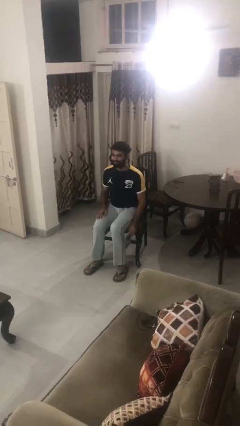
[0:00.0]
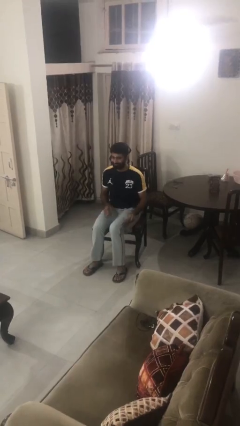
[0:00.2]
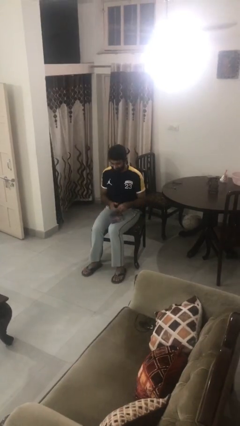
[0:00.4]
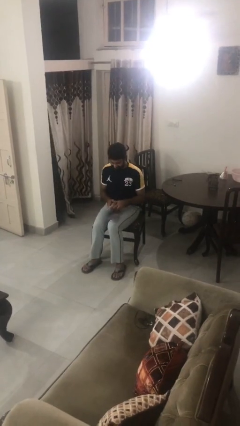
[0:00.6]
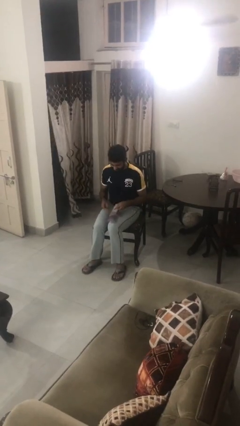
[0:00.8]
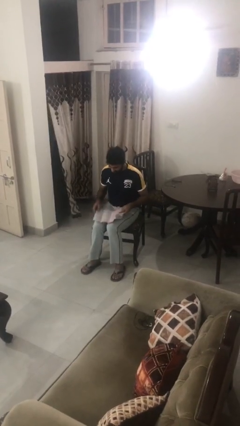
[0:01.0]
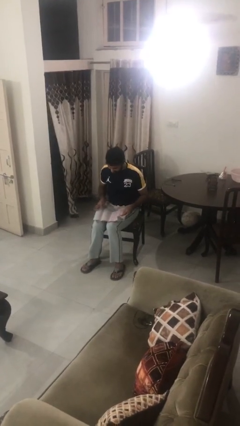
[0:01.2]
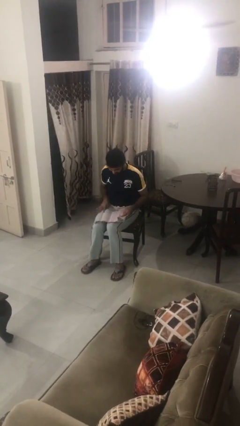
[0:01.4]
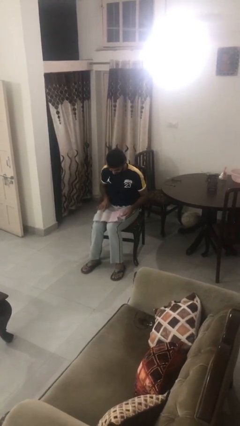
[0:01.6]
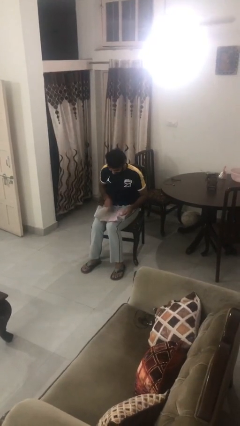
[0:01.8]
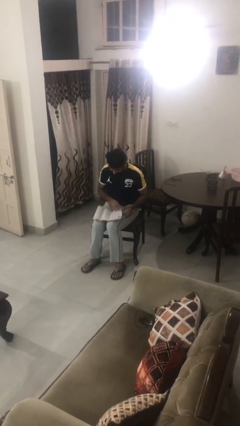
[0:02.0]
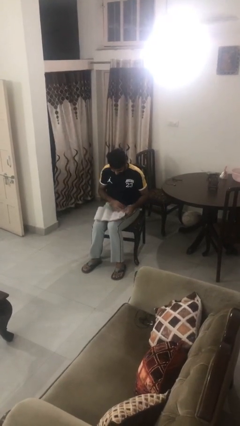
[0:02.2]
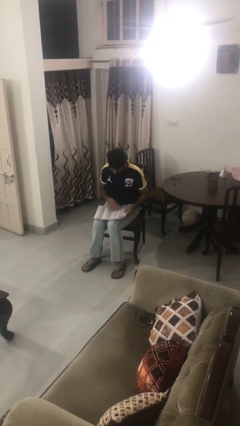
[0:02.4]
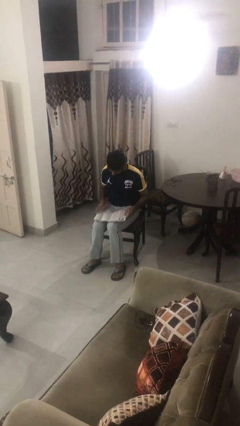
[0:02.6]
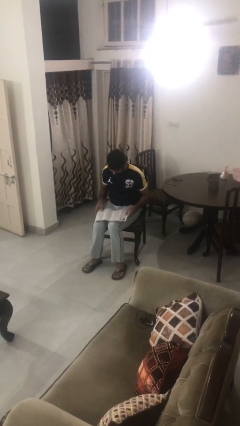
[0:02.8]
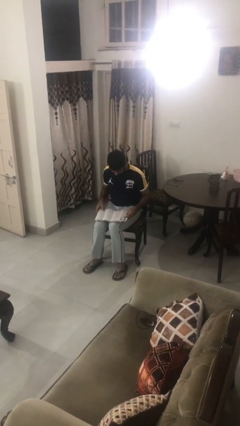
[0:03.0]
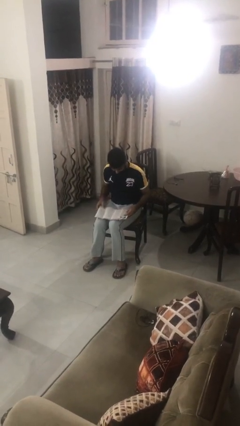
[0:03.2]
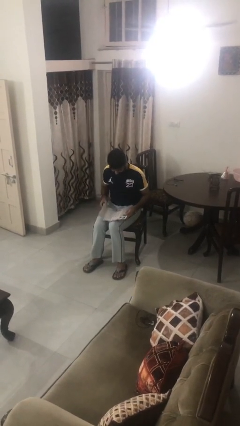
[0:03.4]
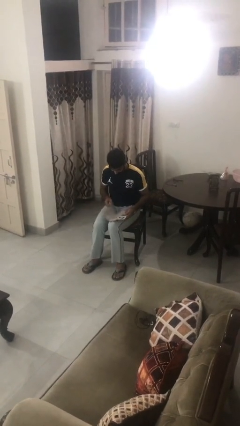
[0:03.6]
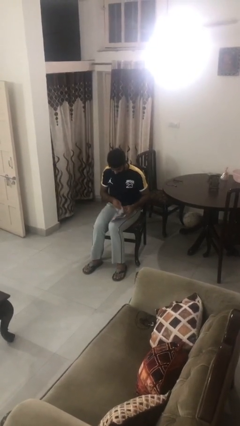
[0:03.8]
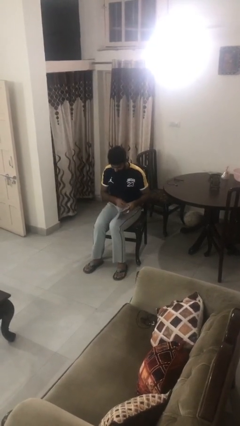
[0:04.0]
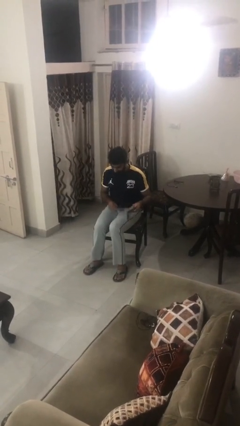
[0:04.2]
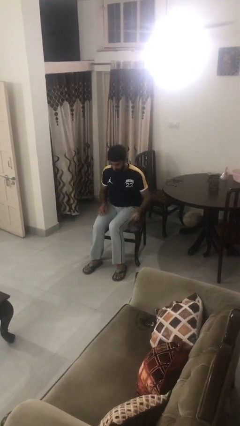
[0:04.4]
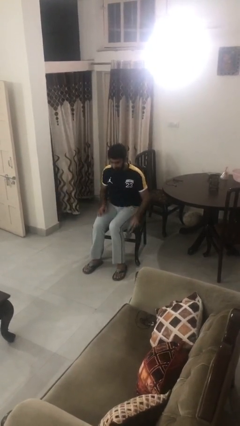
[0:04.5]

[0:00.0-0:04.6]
person reads magazine

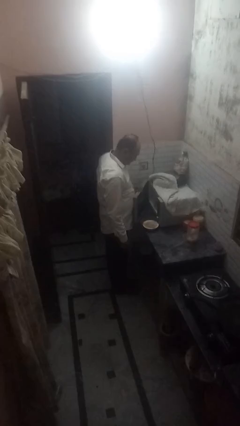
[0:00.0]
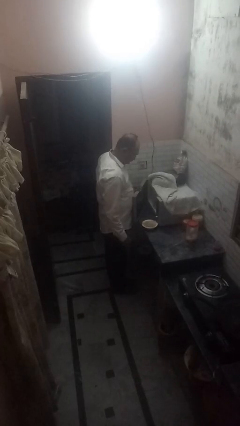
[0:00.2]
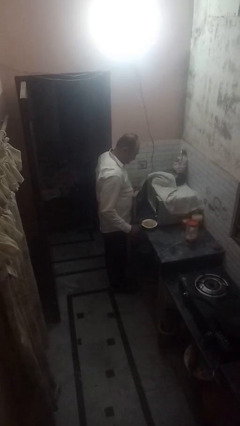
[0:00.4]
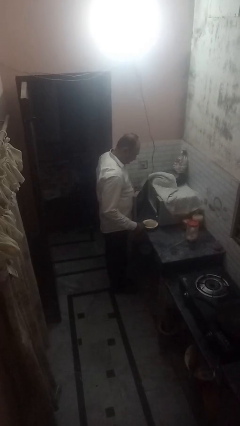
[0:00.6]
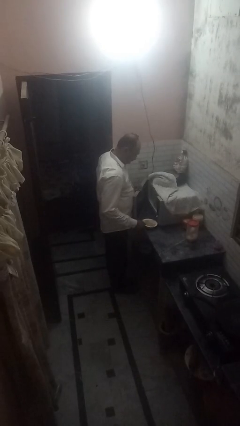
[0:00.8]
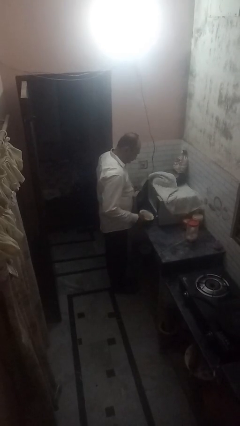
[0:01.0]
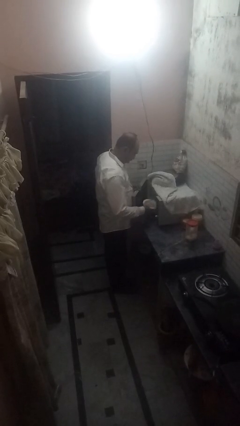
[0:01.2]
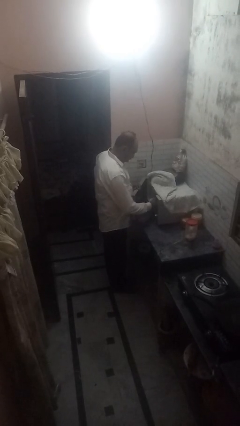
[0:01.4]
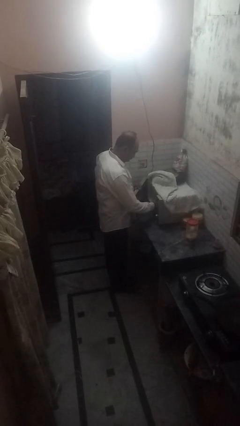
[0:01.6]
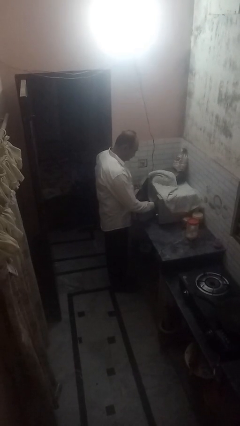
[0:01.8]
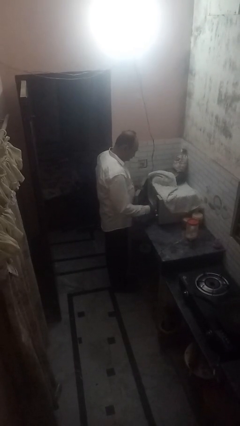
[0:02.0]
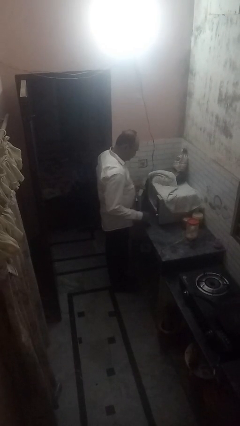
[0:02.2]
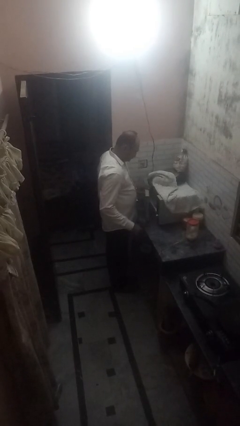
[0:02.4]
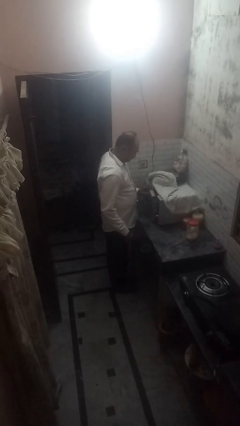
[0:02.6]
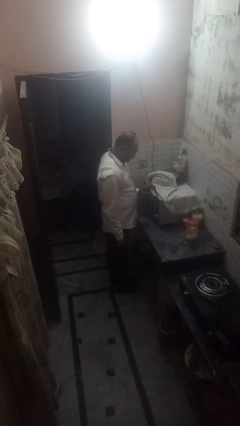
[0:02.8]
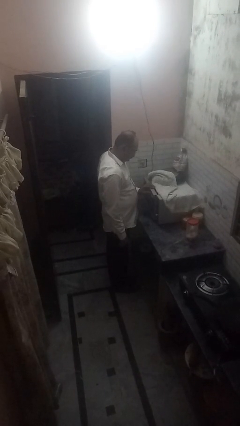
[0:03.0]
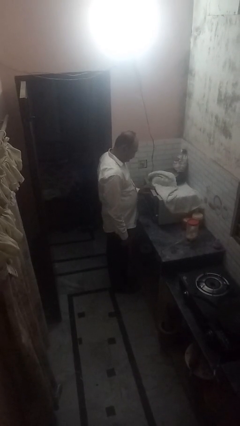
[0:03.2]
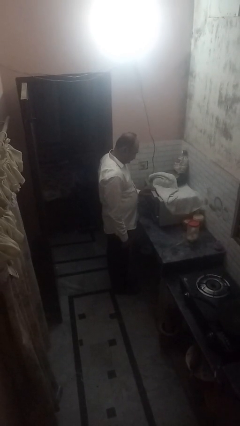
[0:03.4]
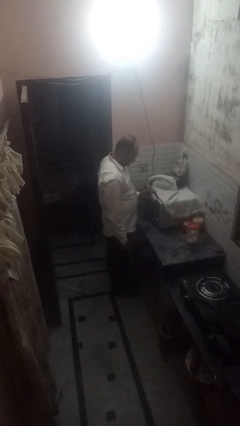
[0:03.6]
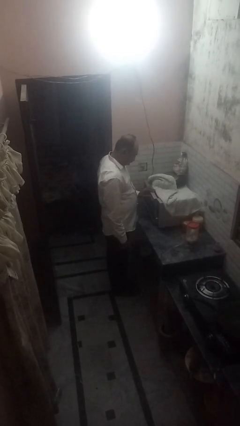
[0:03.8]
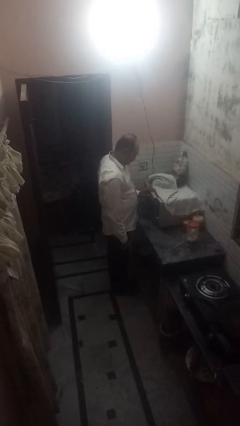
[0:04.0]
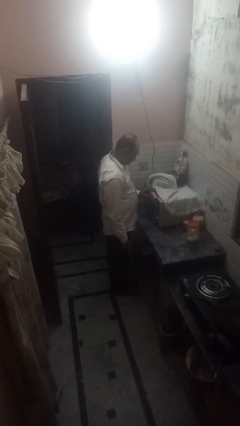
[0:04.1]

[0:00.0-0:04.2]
person puts object into microwave

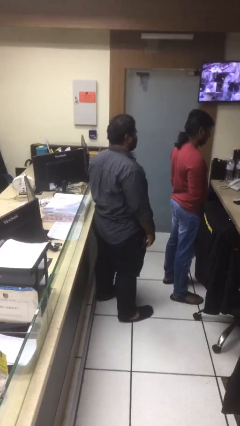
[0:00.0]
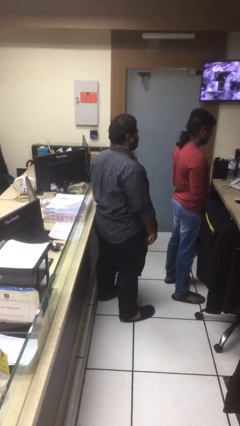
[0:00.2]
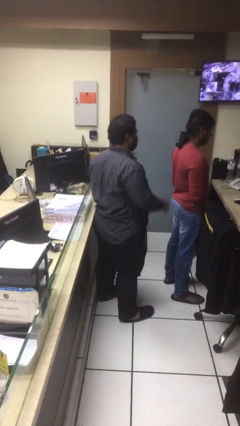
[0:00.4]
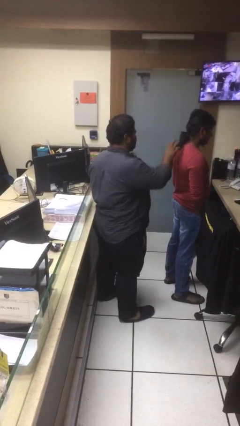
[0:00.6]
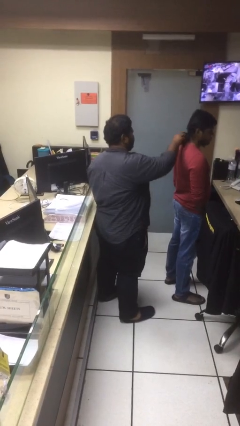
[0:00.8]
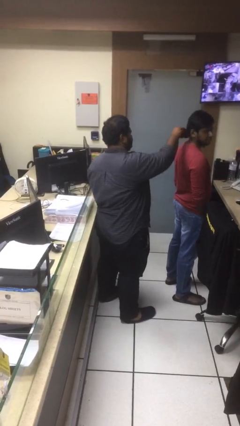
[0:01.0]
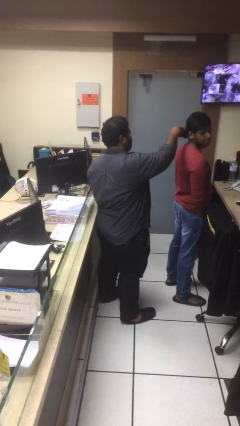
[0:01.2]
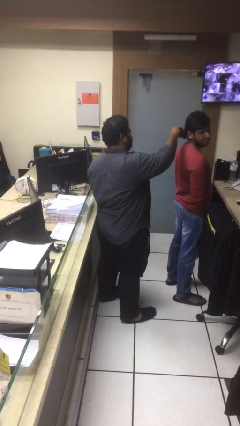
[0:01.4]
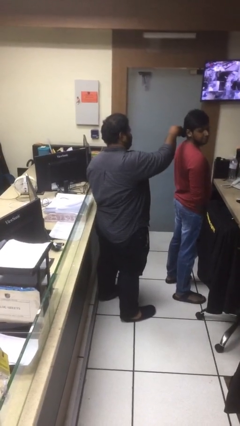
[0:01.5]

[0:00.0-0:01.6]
person grabs person by hair

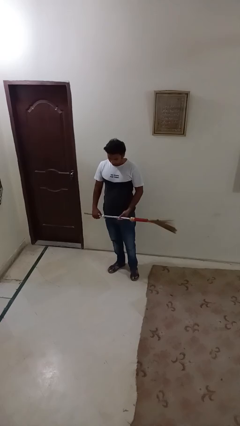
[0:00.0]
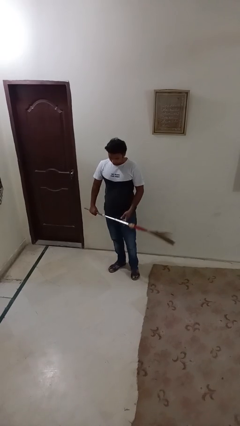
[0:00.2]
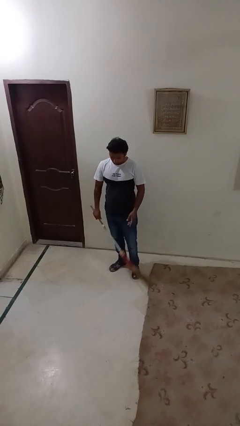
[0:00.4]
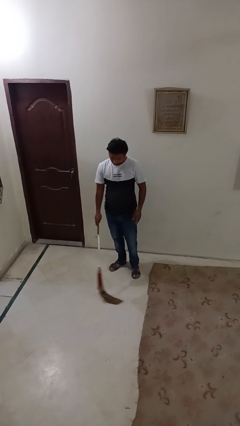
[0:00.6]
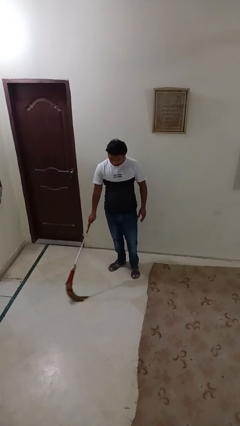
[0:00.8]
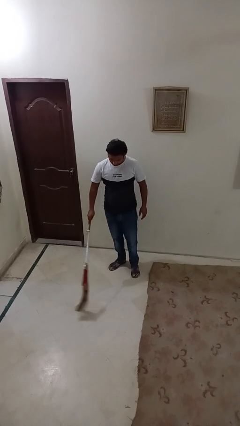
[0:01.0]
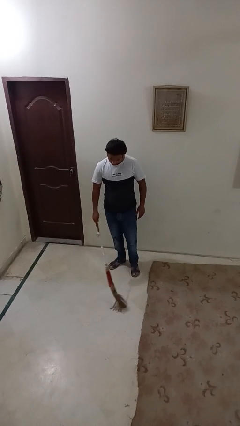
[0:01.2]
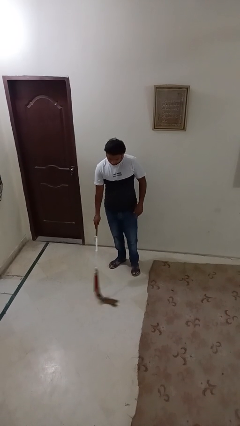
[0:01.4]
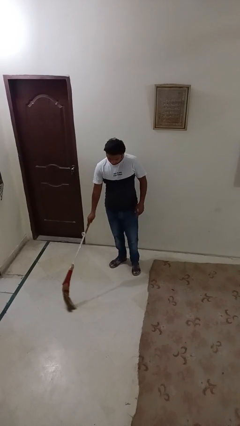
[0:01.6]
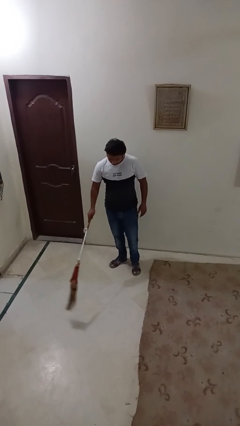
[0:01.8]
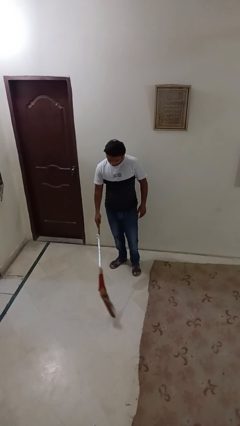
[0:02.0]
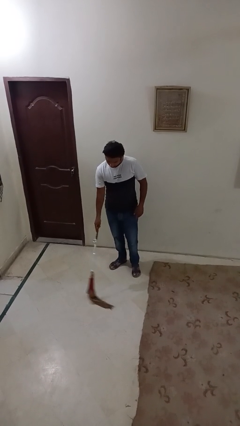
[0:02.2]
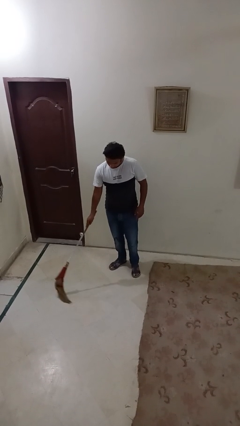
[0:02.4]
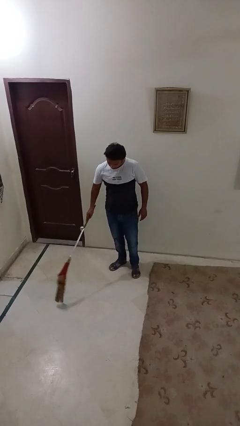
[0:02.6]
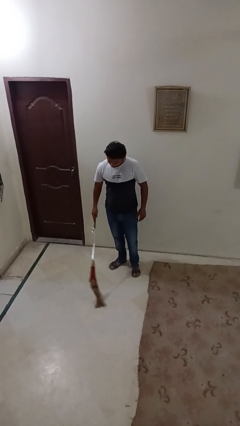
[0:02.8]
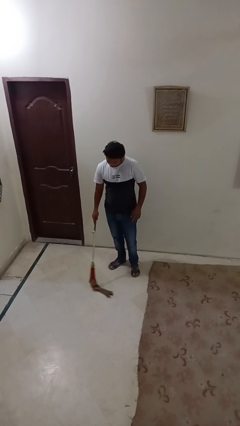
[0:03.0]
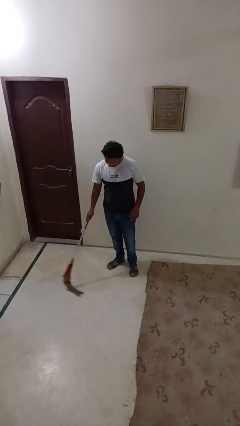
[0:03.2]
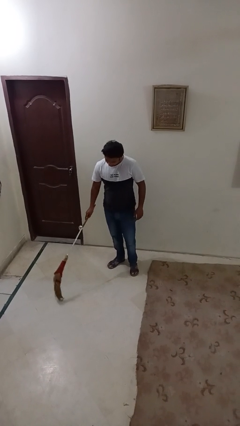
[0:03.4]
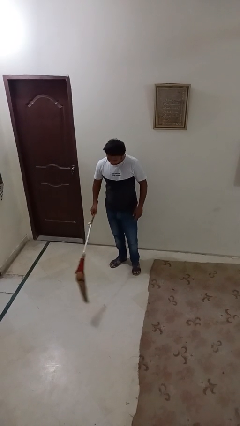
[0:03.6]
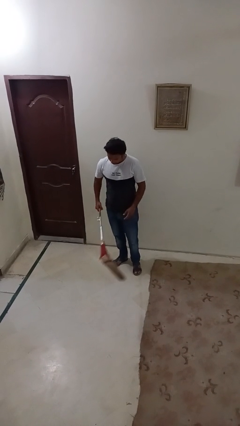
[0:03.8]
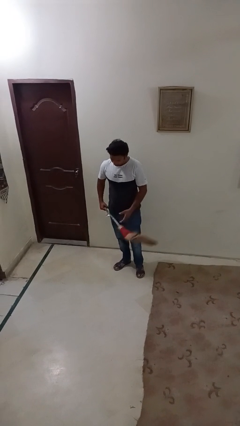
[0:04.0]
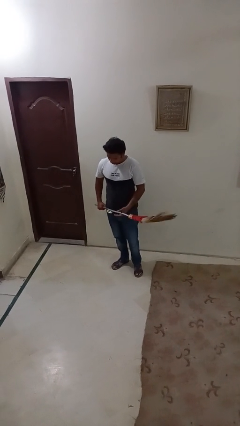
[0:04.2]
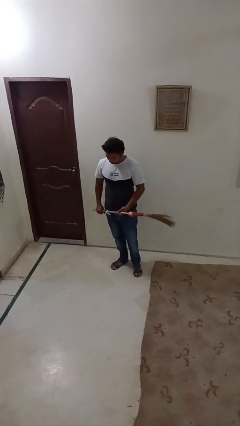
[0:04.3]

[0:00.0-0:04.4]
person sweeps floor

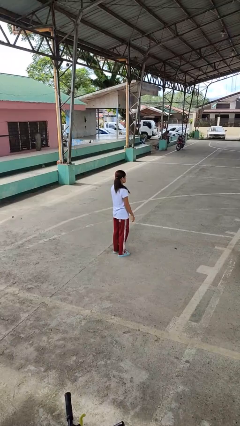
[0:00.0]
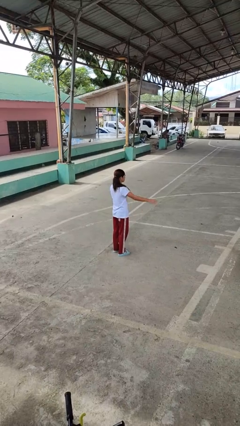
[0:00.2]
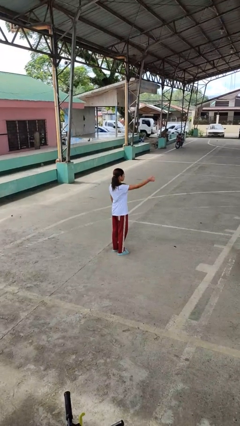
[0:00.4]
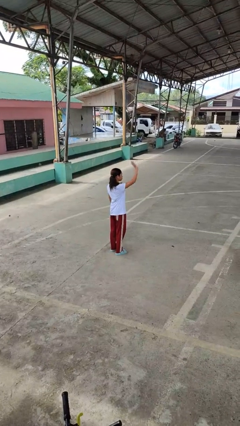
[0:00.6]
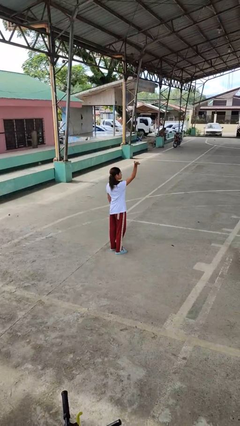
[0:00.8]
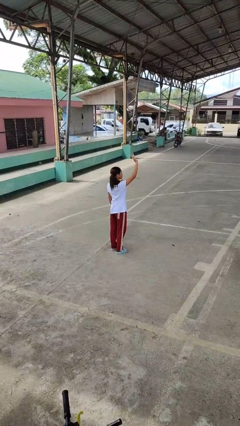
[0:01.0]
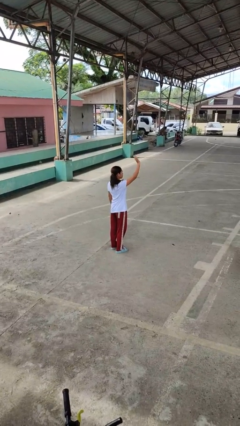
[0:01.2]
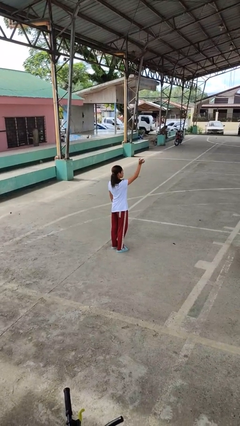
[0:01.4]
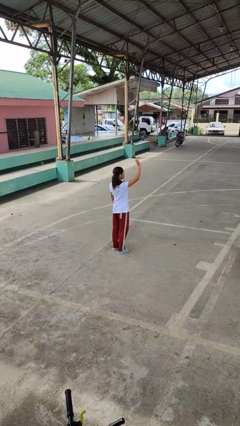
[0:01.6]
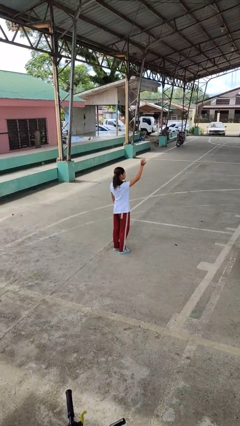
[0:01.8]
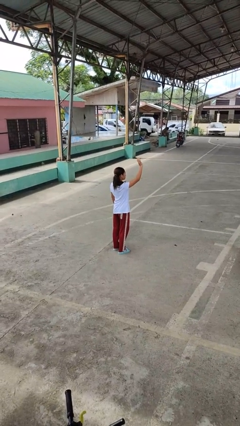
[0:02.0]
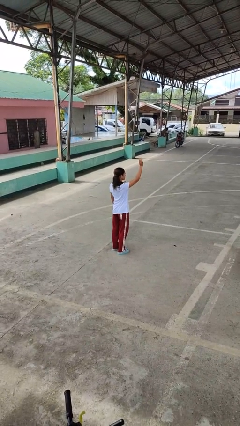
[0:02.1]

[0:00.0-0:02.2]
person waves at person

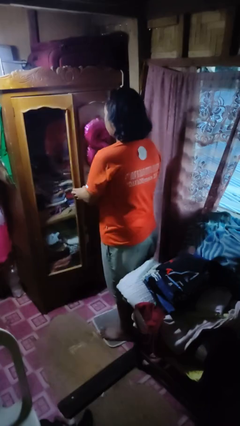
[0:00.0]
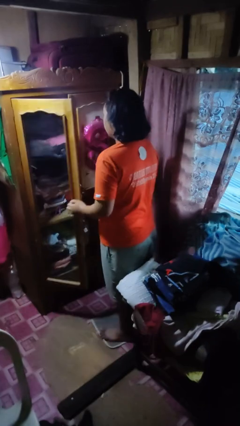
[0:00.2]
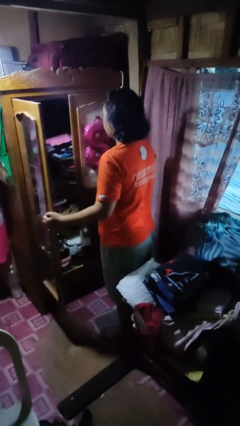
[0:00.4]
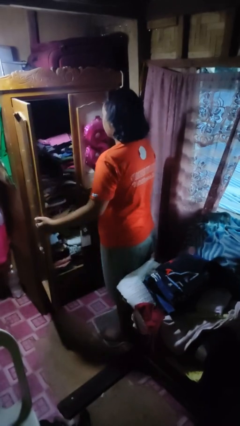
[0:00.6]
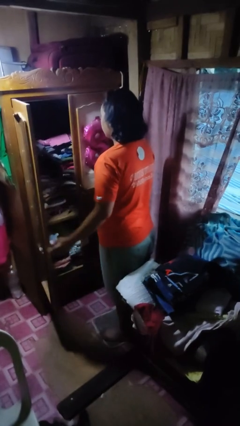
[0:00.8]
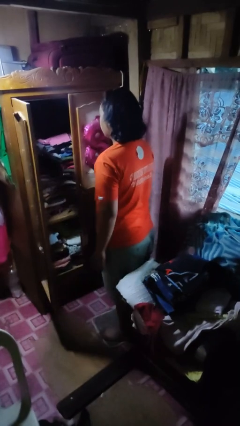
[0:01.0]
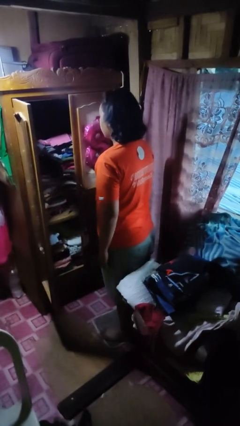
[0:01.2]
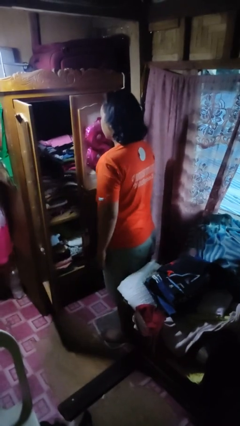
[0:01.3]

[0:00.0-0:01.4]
person opens closet door
